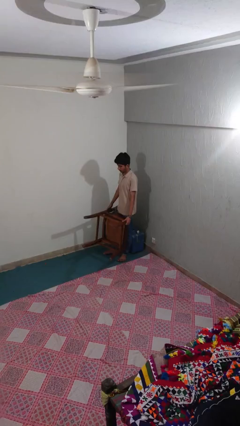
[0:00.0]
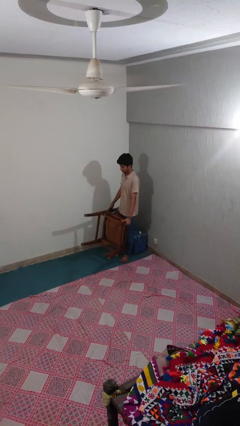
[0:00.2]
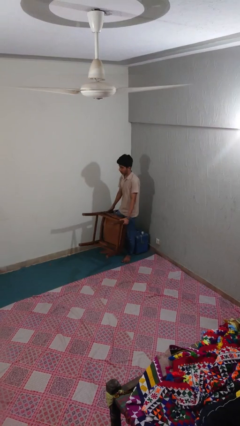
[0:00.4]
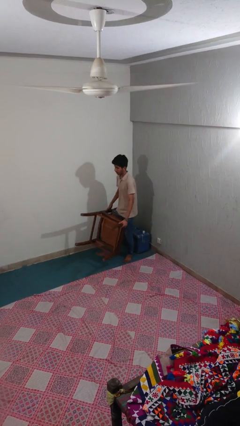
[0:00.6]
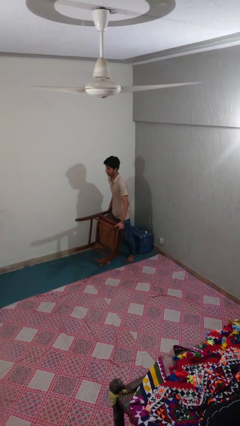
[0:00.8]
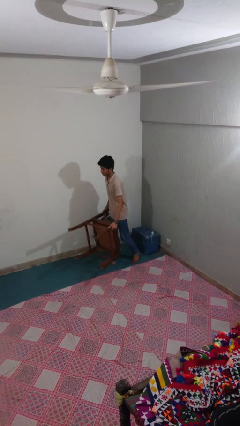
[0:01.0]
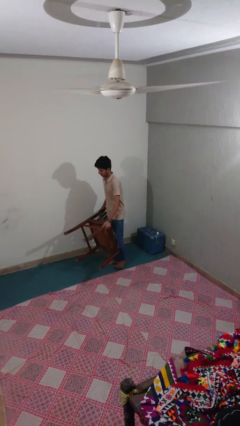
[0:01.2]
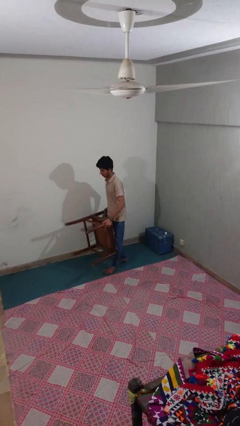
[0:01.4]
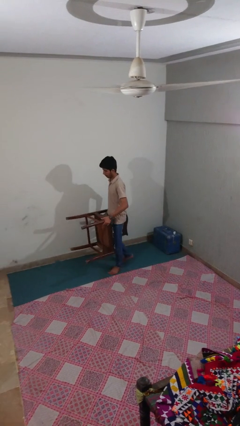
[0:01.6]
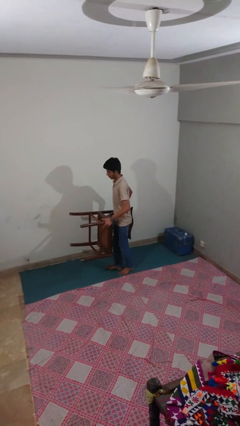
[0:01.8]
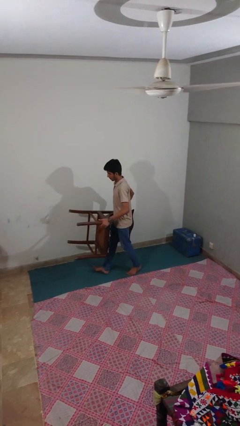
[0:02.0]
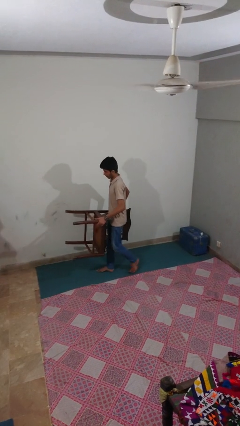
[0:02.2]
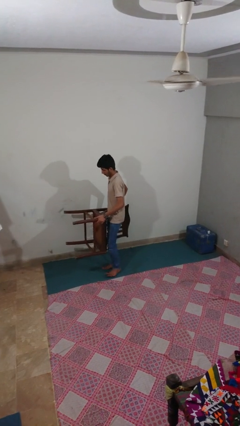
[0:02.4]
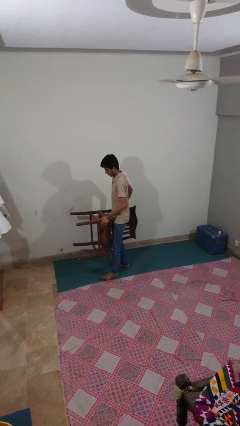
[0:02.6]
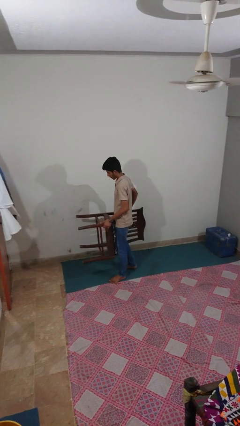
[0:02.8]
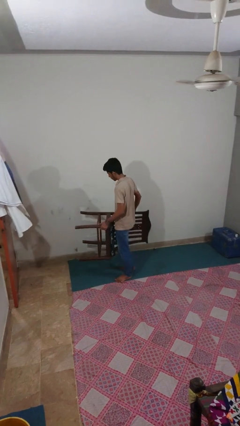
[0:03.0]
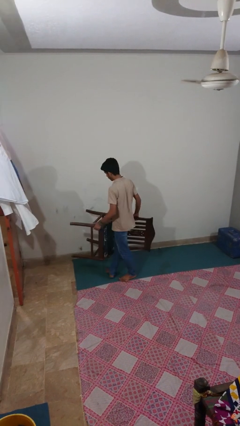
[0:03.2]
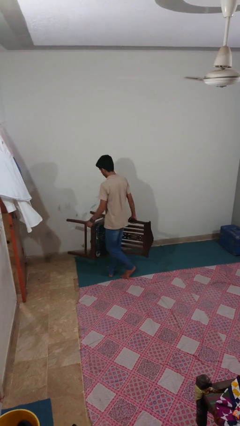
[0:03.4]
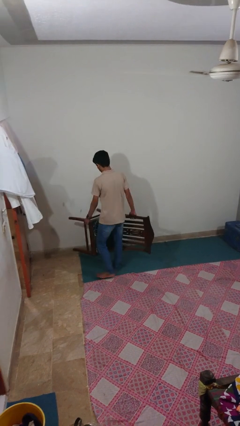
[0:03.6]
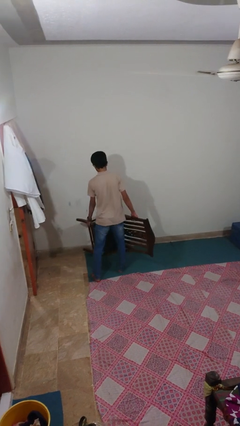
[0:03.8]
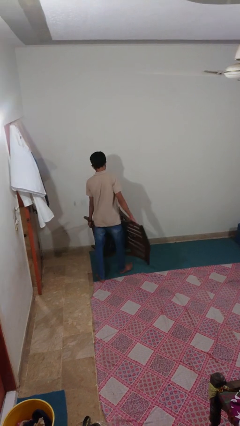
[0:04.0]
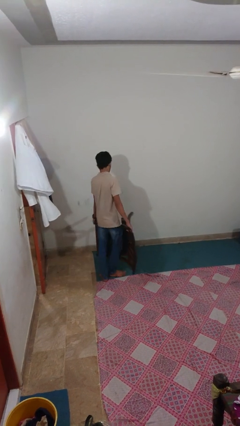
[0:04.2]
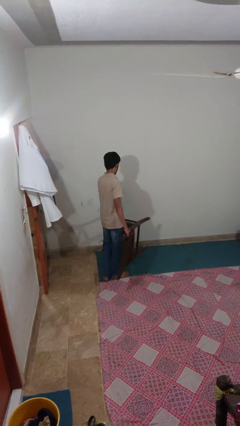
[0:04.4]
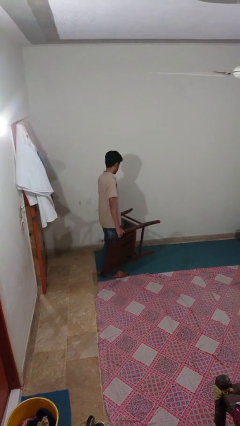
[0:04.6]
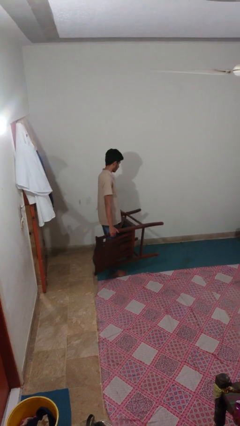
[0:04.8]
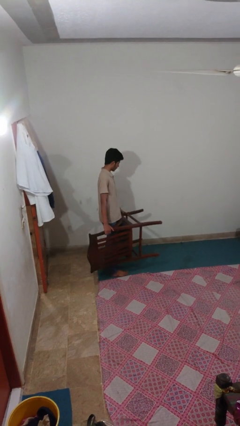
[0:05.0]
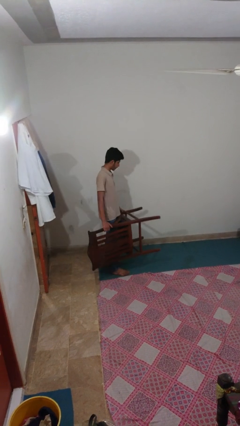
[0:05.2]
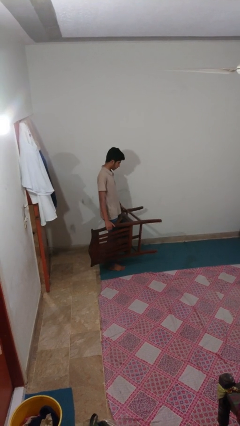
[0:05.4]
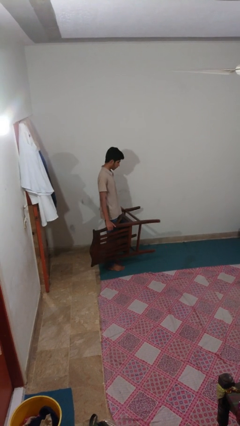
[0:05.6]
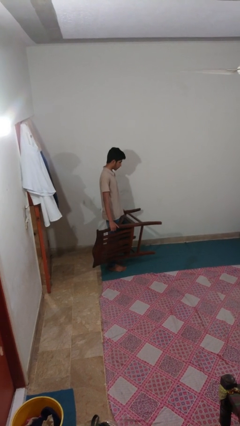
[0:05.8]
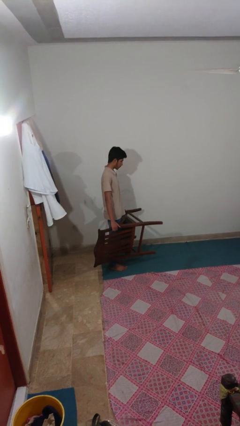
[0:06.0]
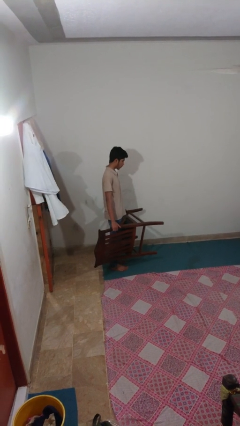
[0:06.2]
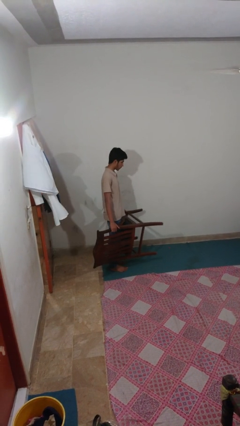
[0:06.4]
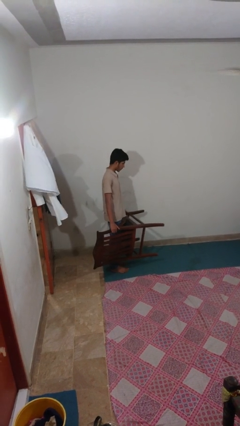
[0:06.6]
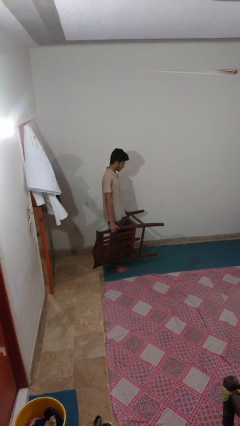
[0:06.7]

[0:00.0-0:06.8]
person carries furniture

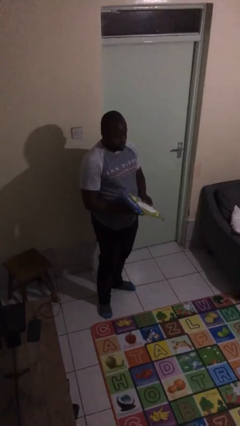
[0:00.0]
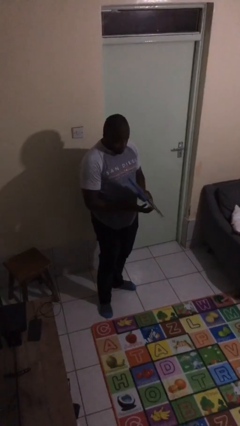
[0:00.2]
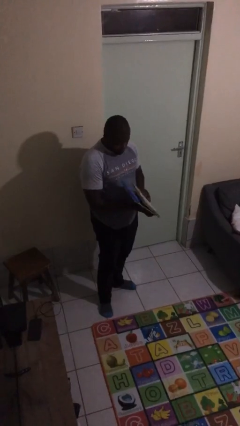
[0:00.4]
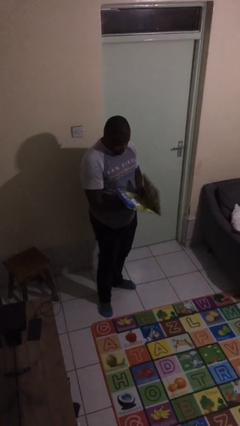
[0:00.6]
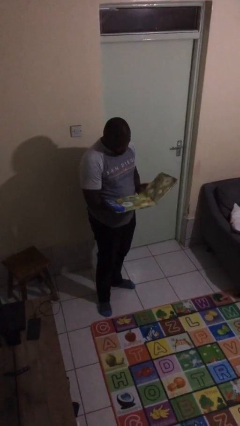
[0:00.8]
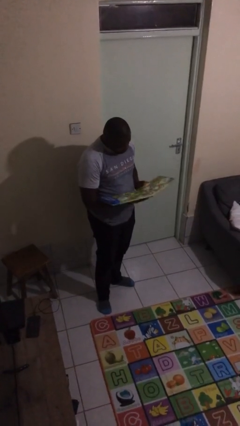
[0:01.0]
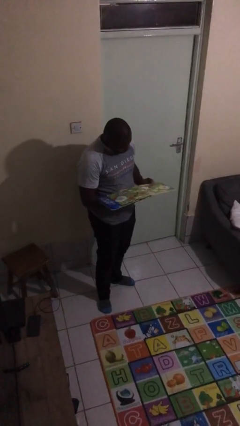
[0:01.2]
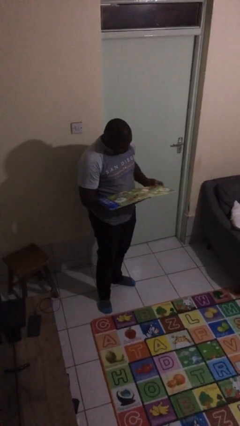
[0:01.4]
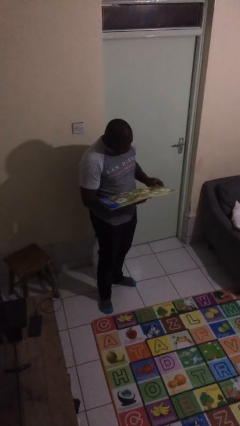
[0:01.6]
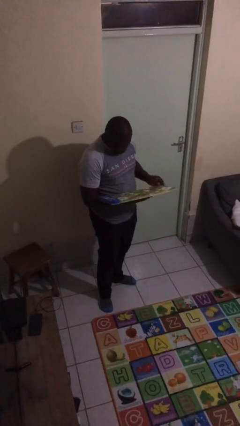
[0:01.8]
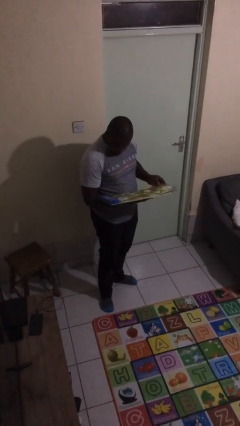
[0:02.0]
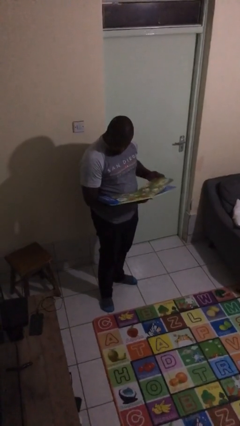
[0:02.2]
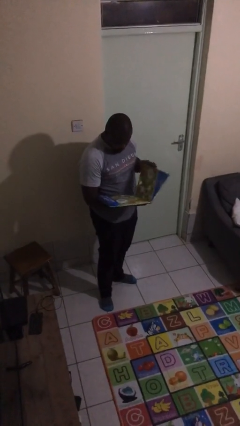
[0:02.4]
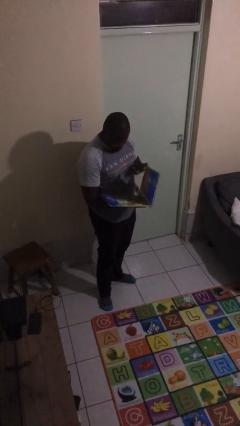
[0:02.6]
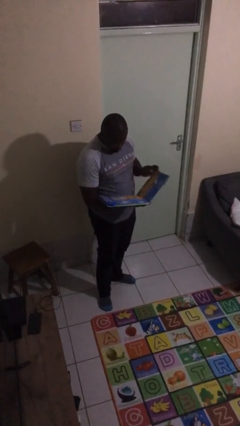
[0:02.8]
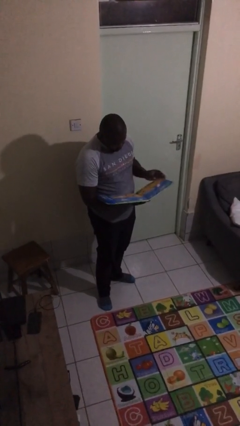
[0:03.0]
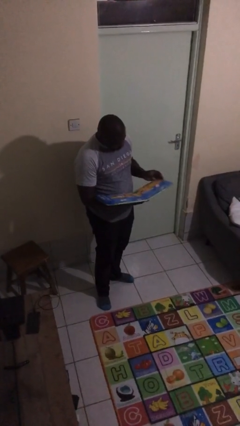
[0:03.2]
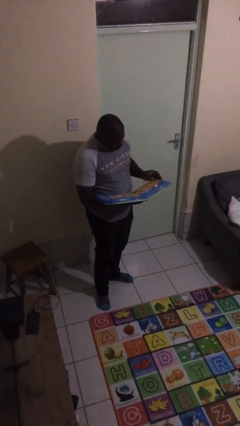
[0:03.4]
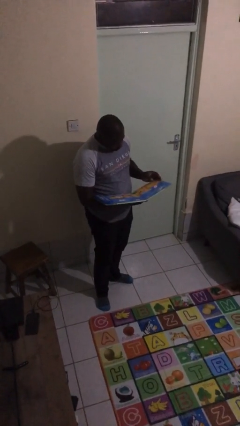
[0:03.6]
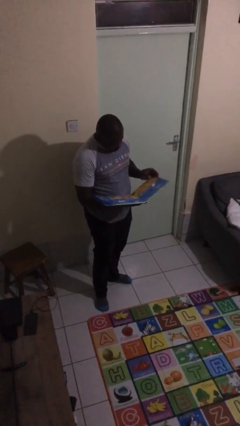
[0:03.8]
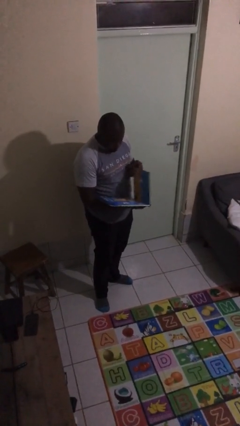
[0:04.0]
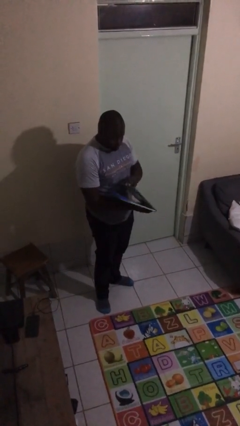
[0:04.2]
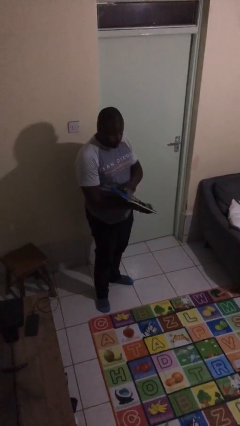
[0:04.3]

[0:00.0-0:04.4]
person reads book

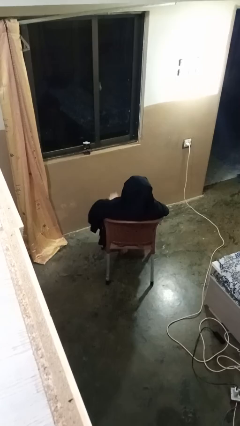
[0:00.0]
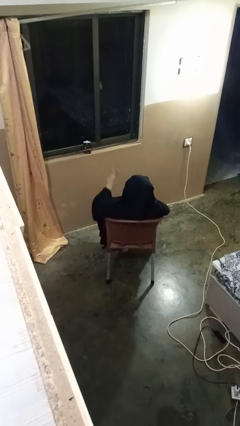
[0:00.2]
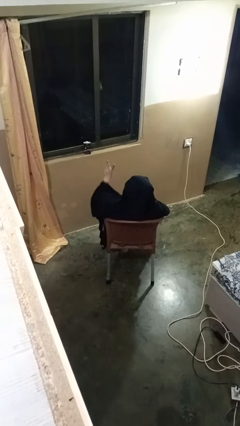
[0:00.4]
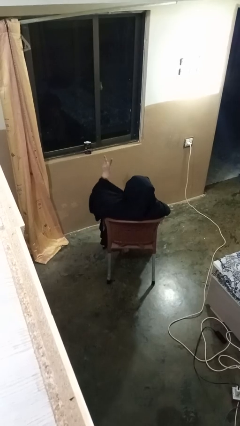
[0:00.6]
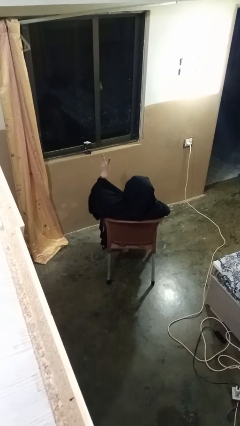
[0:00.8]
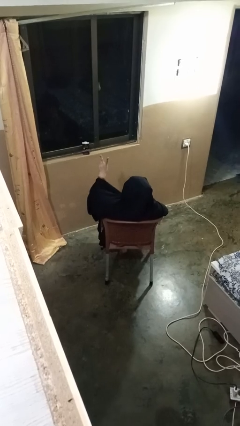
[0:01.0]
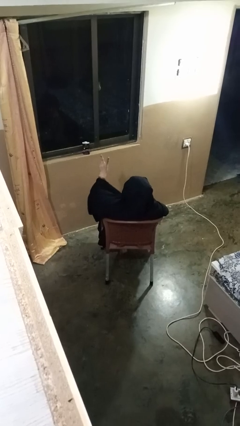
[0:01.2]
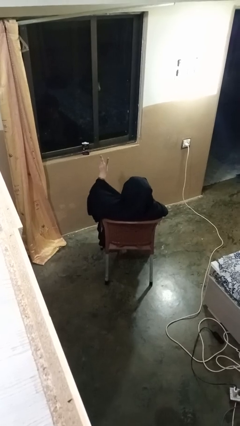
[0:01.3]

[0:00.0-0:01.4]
person gestures peace

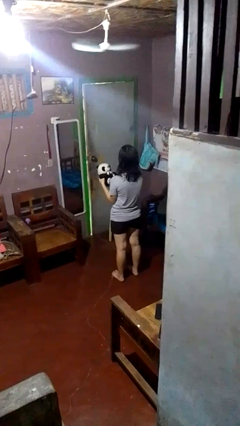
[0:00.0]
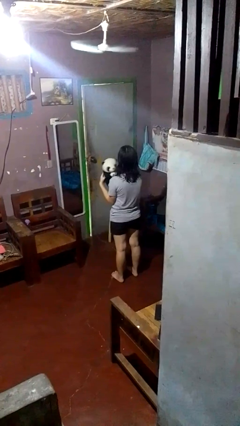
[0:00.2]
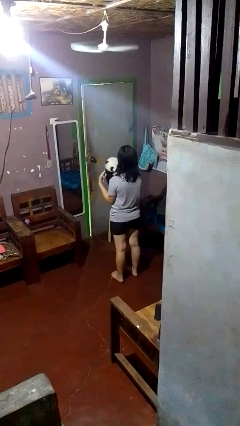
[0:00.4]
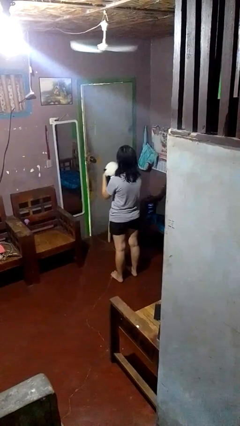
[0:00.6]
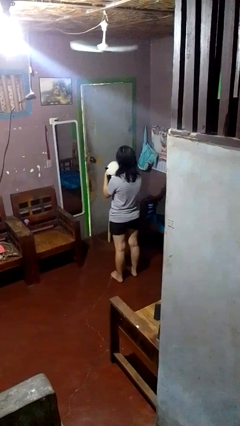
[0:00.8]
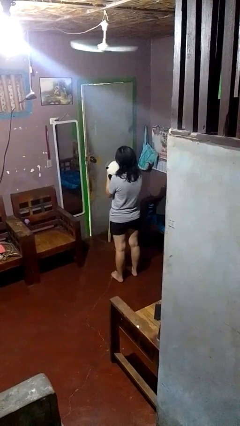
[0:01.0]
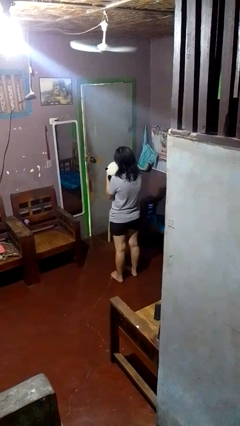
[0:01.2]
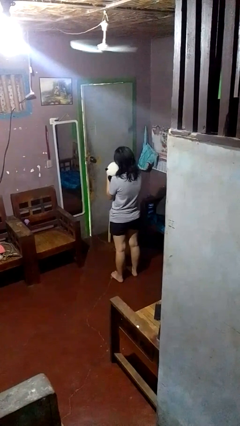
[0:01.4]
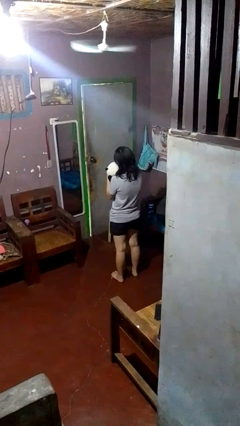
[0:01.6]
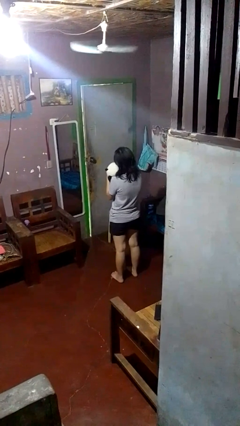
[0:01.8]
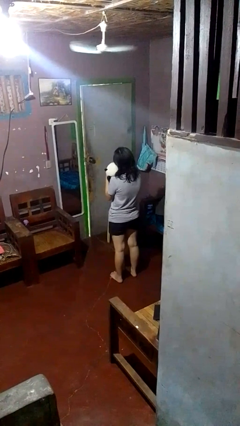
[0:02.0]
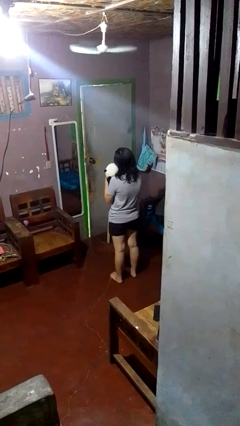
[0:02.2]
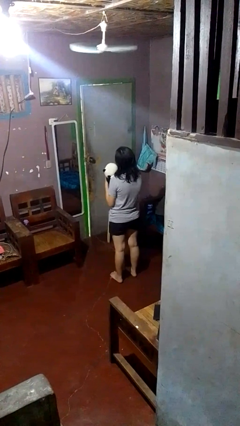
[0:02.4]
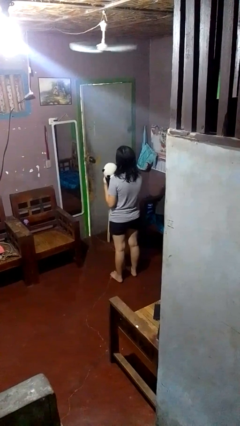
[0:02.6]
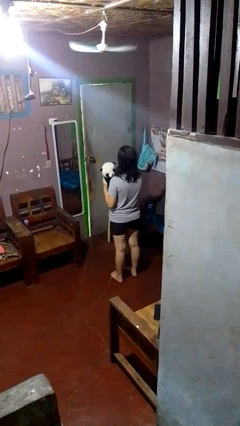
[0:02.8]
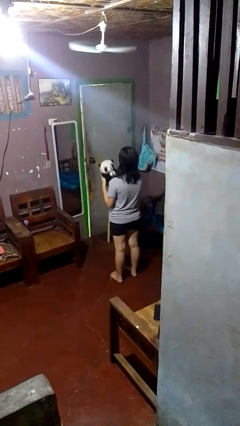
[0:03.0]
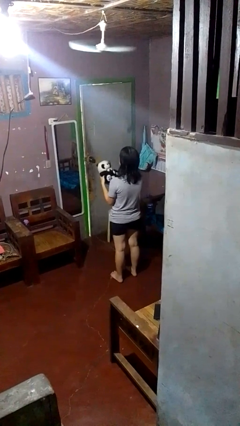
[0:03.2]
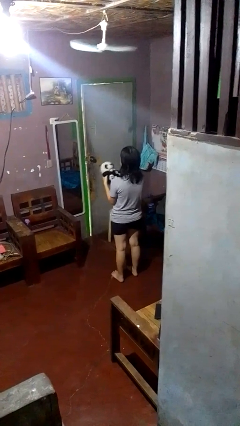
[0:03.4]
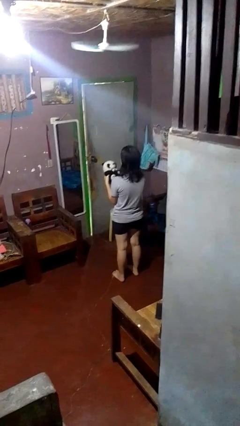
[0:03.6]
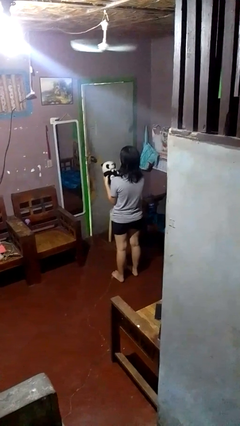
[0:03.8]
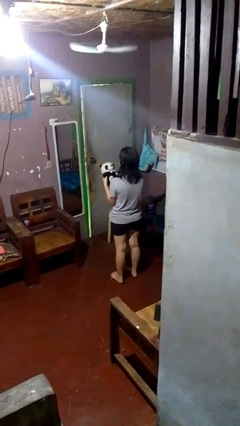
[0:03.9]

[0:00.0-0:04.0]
person hugs stuffed animal

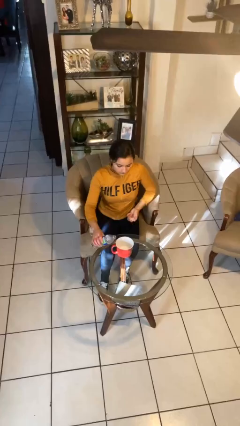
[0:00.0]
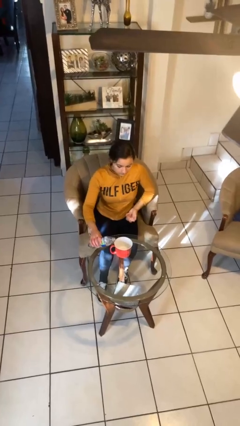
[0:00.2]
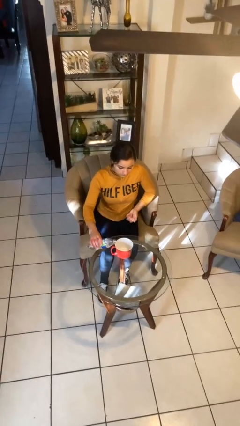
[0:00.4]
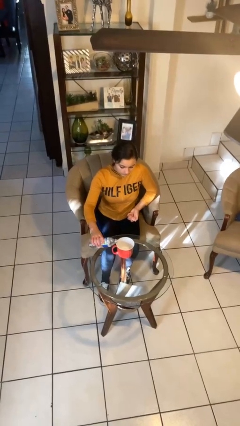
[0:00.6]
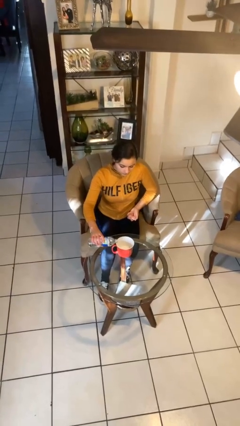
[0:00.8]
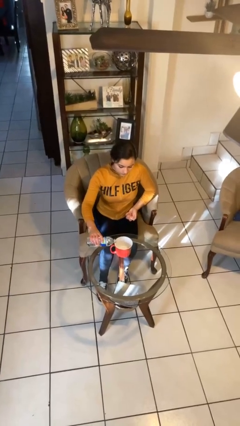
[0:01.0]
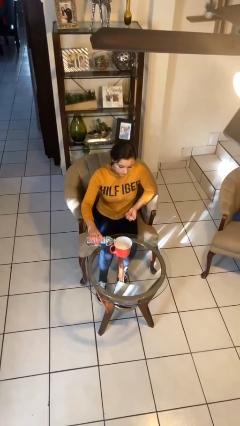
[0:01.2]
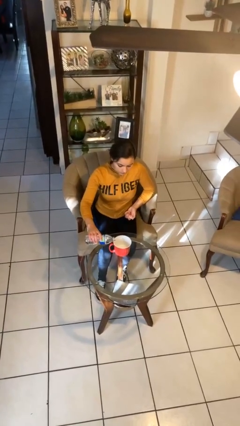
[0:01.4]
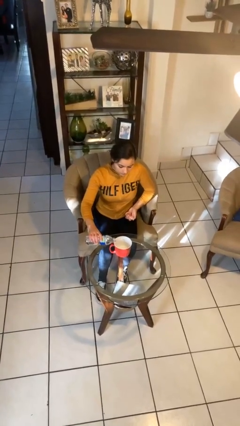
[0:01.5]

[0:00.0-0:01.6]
person pours liquid into cup
